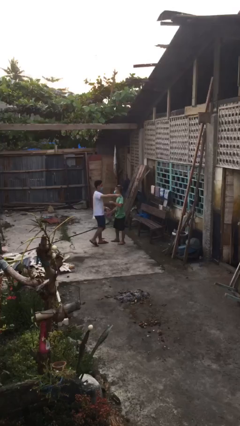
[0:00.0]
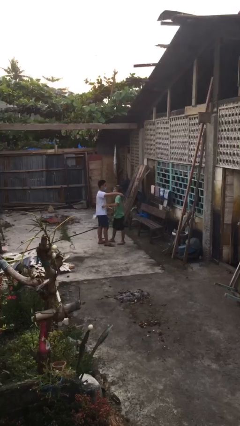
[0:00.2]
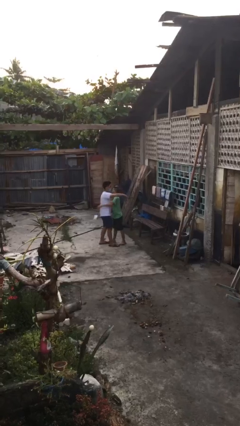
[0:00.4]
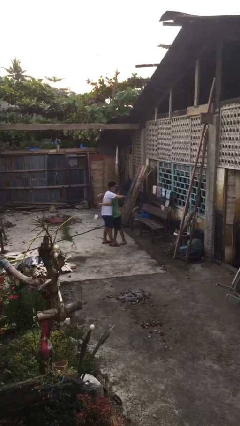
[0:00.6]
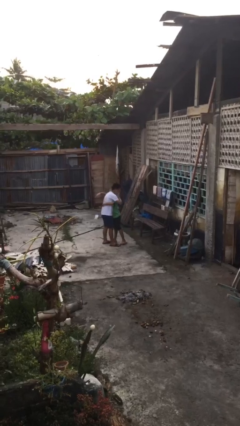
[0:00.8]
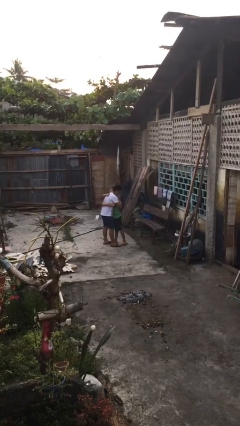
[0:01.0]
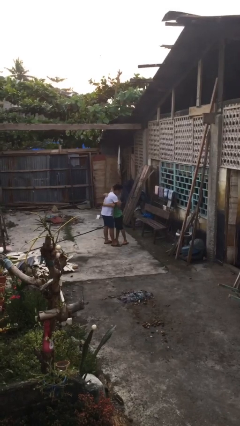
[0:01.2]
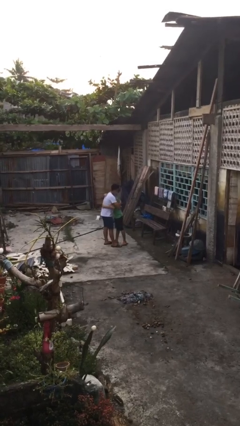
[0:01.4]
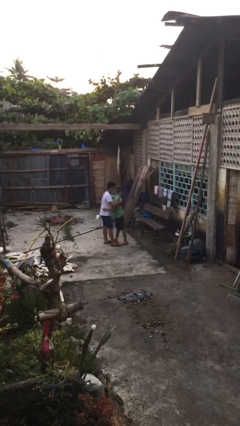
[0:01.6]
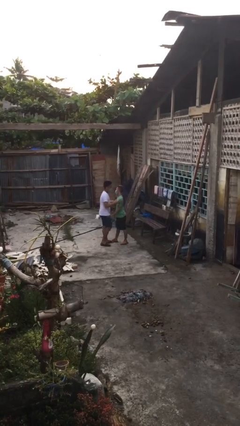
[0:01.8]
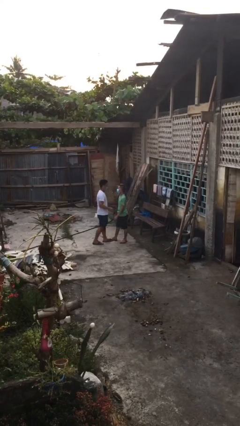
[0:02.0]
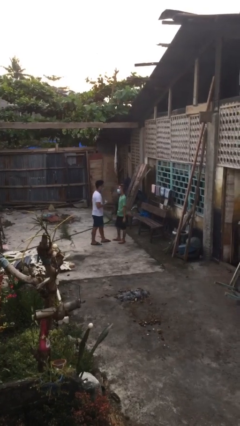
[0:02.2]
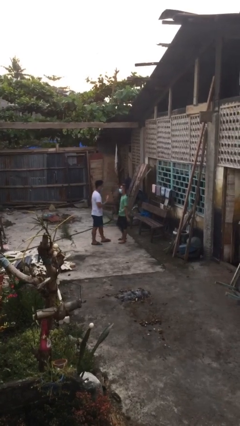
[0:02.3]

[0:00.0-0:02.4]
person embraces person

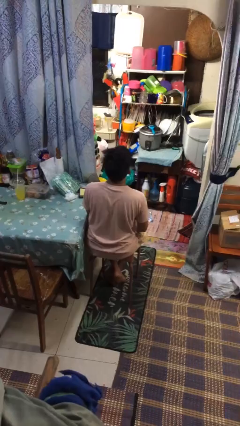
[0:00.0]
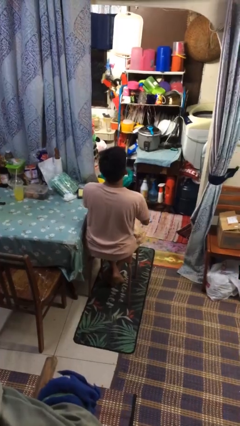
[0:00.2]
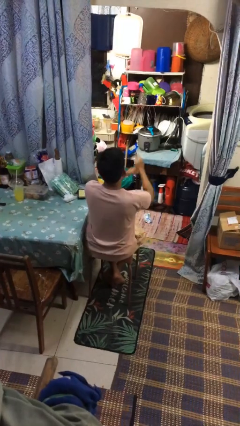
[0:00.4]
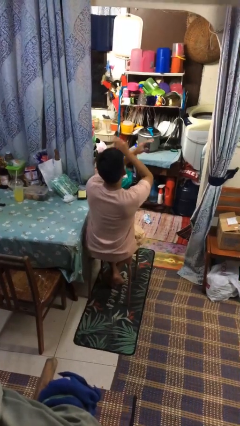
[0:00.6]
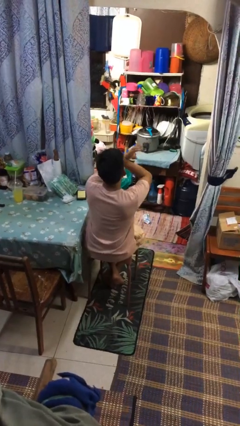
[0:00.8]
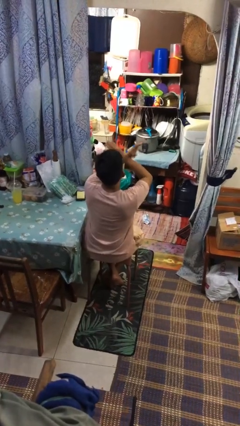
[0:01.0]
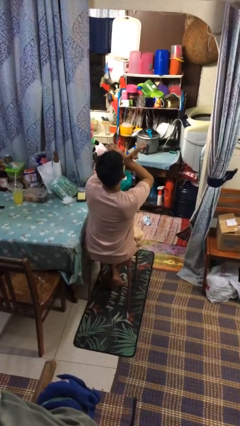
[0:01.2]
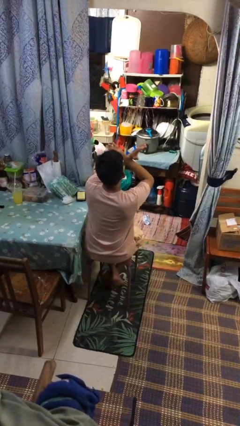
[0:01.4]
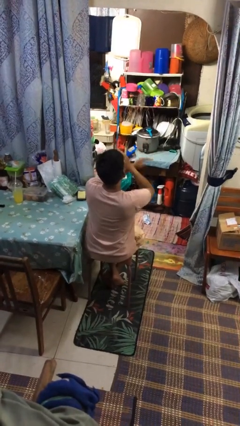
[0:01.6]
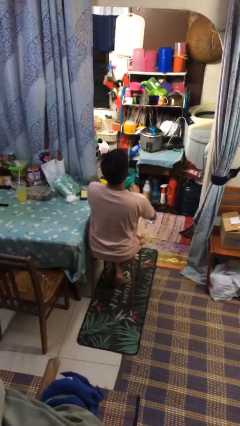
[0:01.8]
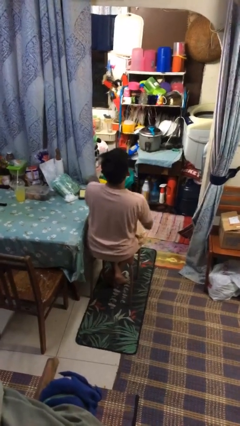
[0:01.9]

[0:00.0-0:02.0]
person gestures arms x

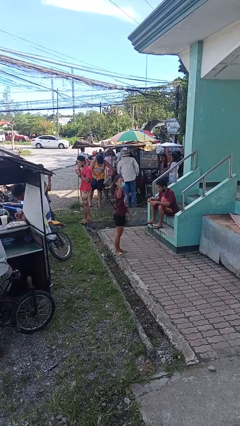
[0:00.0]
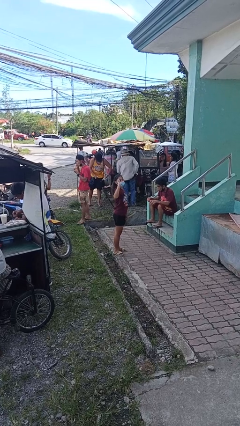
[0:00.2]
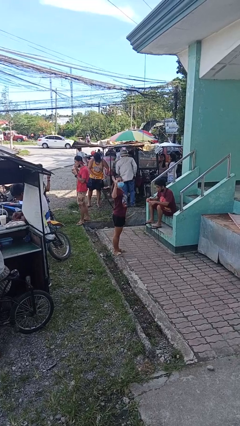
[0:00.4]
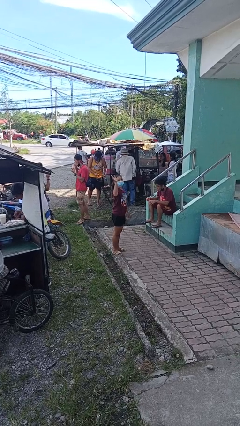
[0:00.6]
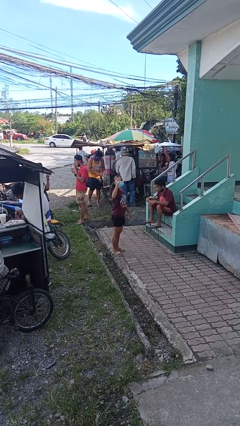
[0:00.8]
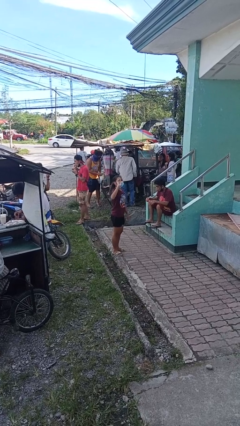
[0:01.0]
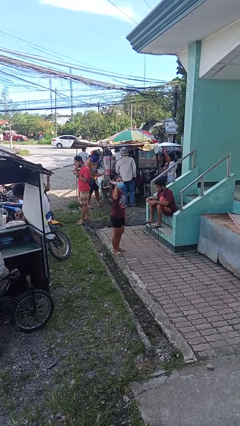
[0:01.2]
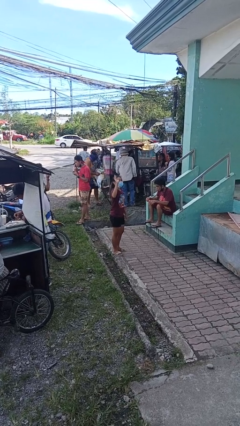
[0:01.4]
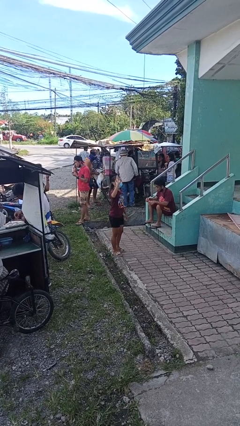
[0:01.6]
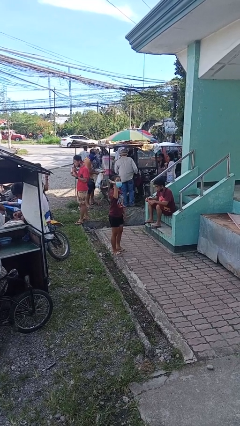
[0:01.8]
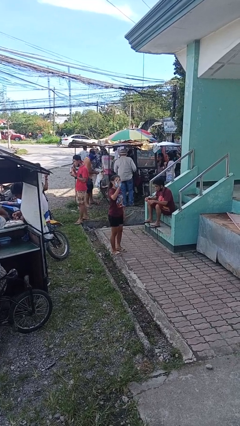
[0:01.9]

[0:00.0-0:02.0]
person waves at person

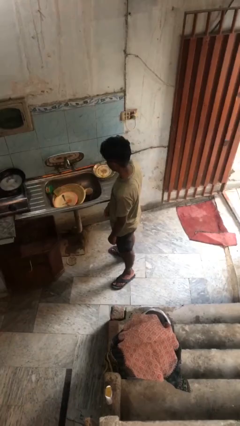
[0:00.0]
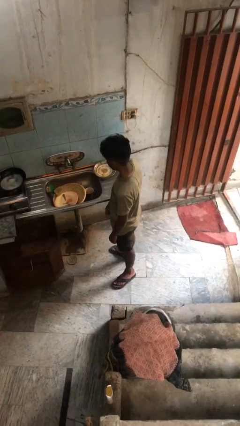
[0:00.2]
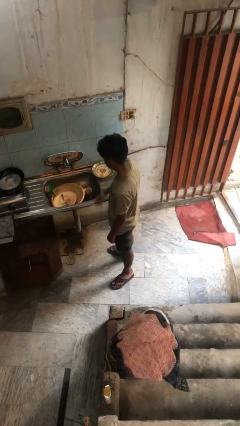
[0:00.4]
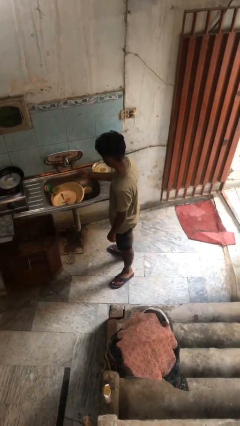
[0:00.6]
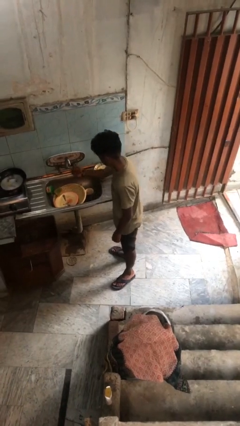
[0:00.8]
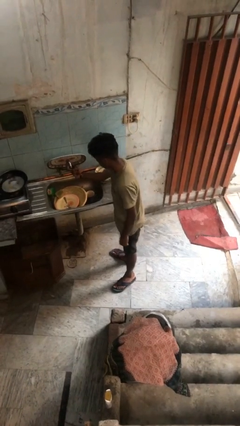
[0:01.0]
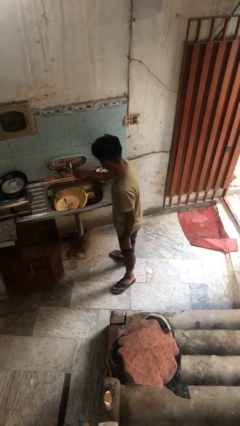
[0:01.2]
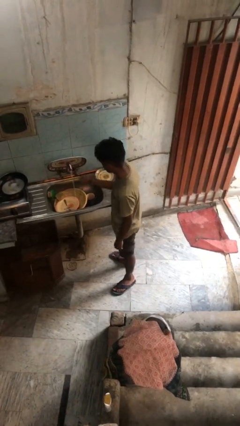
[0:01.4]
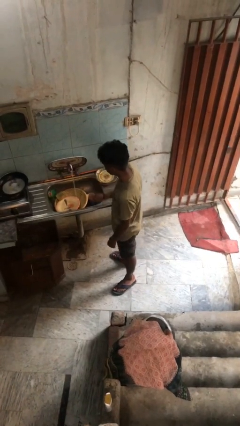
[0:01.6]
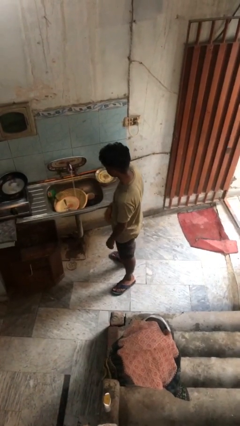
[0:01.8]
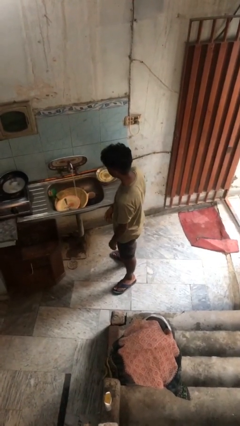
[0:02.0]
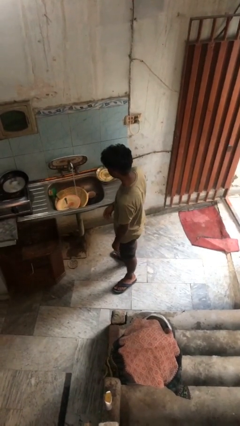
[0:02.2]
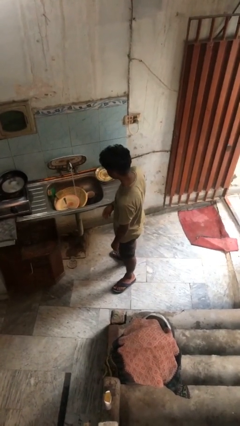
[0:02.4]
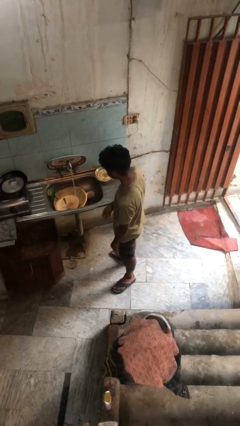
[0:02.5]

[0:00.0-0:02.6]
person turns on faucet

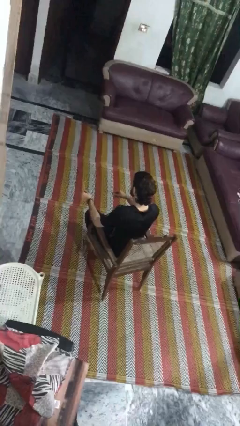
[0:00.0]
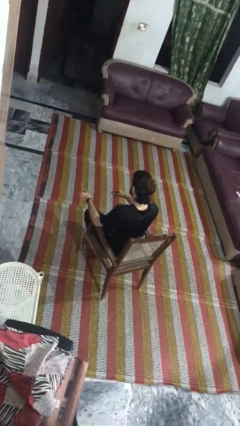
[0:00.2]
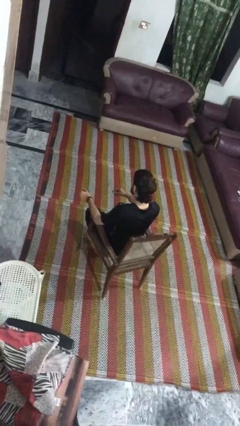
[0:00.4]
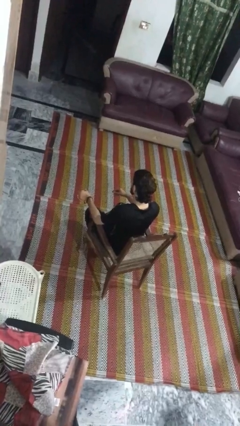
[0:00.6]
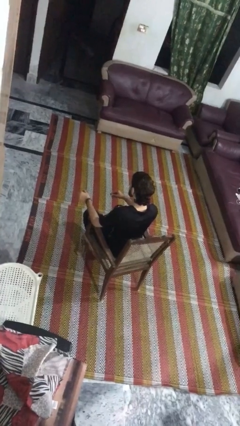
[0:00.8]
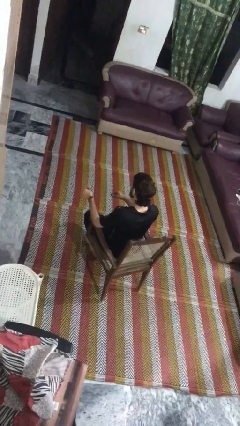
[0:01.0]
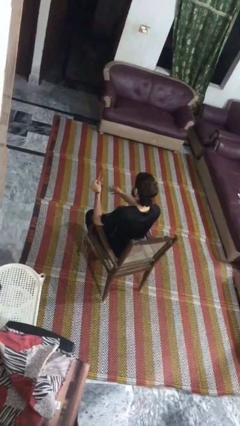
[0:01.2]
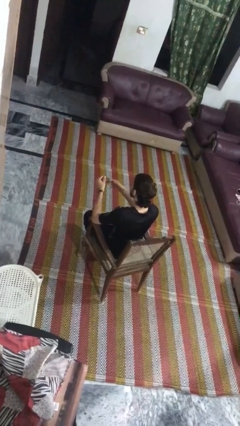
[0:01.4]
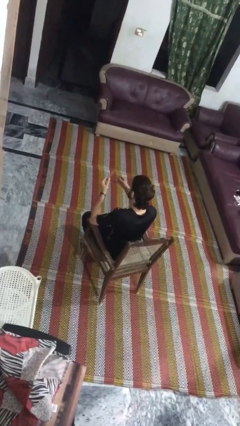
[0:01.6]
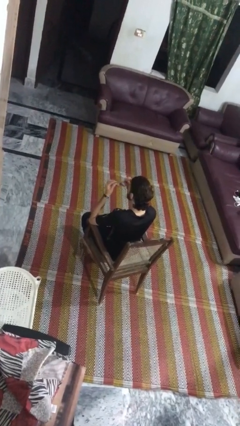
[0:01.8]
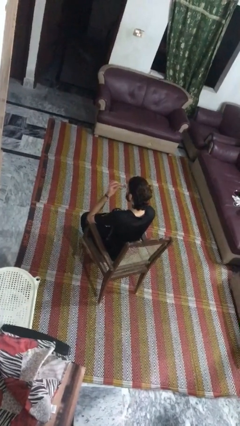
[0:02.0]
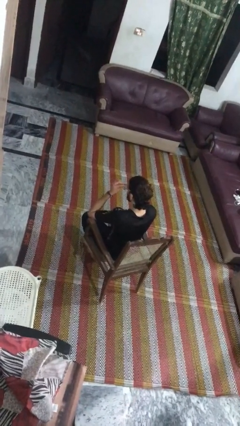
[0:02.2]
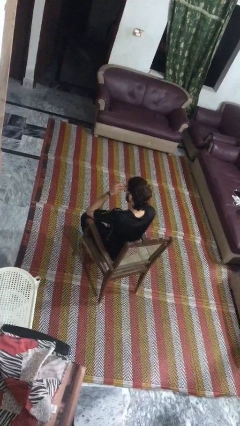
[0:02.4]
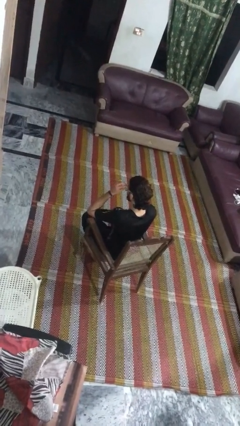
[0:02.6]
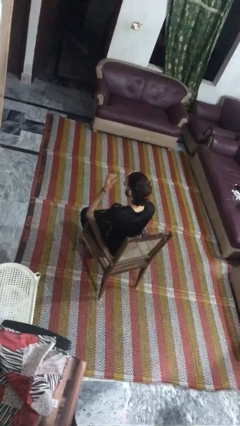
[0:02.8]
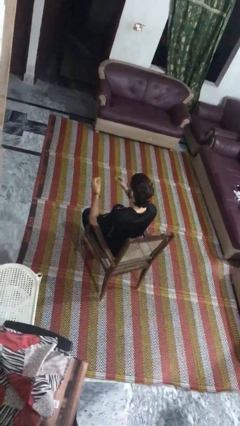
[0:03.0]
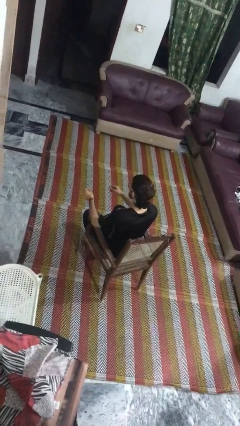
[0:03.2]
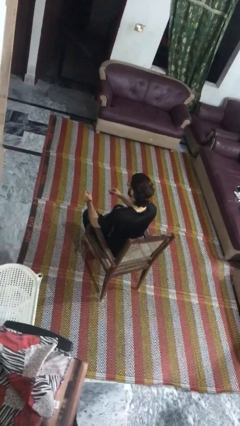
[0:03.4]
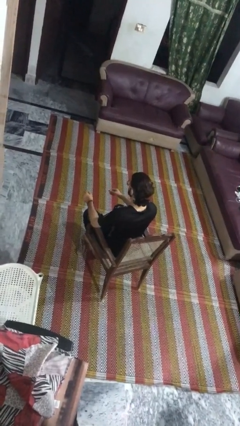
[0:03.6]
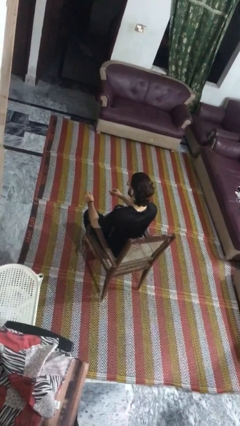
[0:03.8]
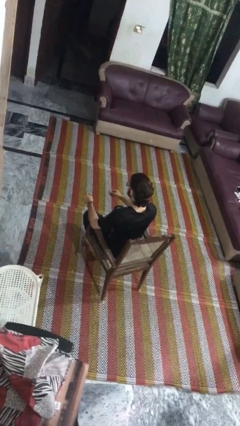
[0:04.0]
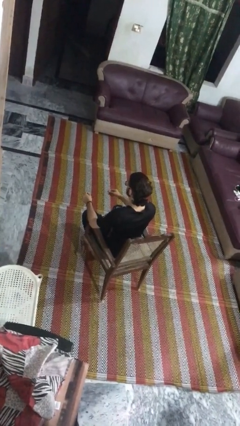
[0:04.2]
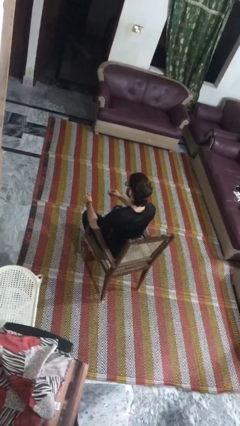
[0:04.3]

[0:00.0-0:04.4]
person puts on glasses

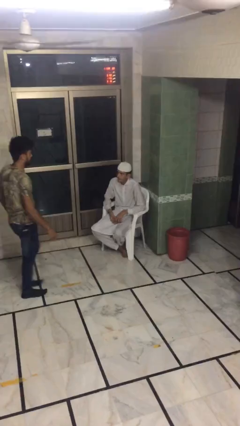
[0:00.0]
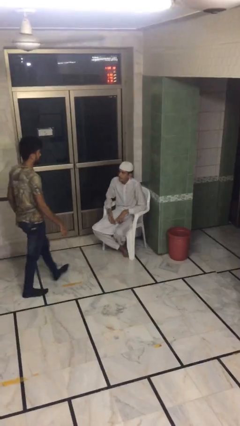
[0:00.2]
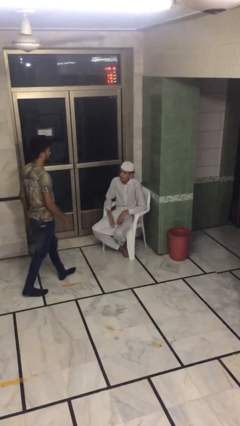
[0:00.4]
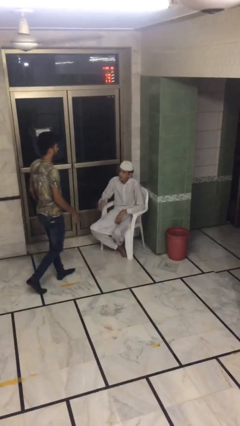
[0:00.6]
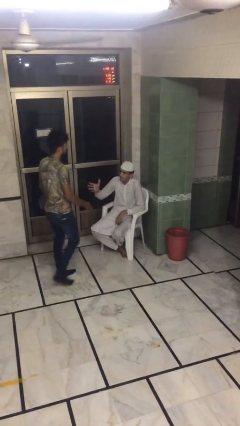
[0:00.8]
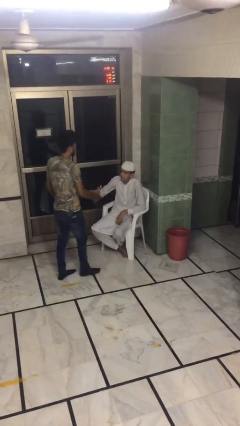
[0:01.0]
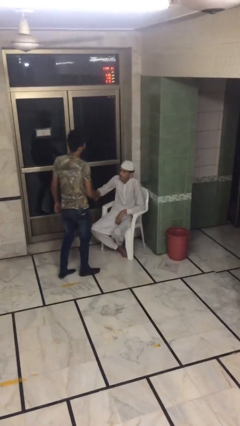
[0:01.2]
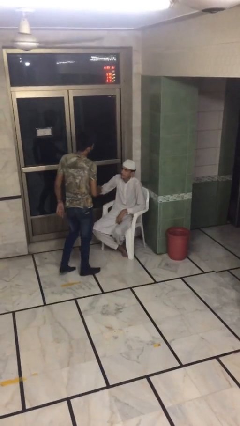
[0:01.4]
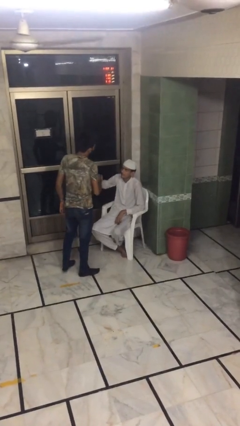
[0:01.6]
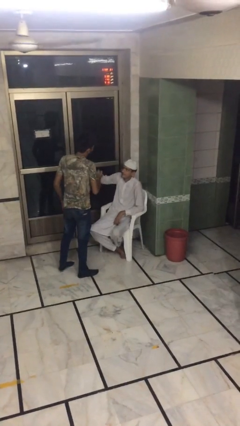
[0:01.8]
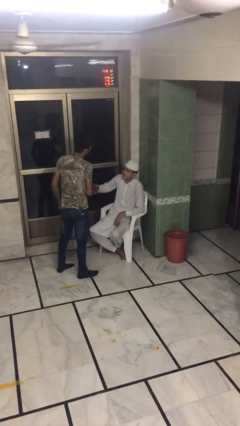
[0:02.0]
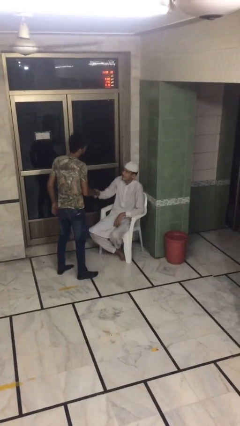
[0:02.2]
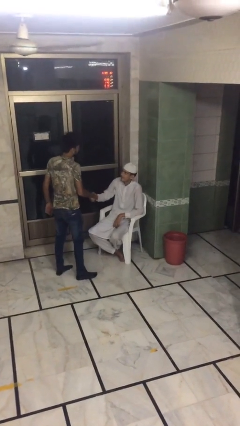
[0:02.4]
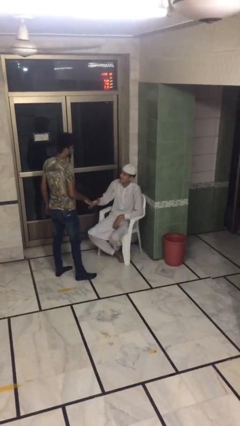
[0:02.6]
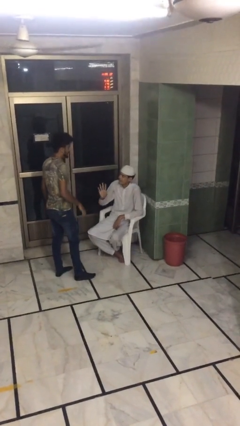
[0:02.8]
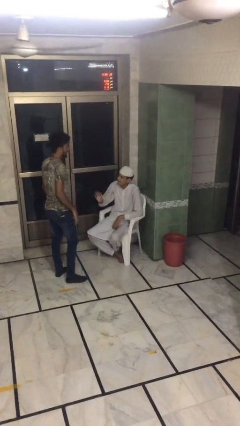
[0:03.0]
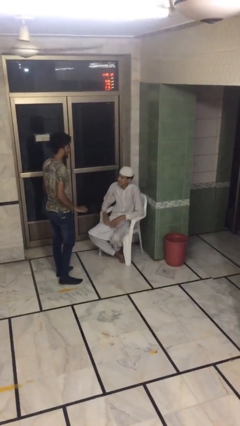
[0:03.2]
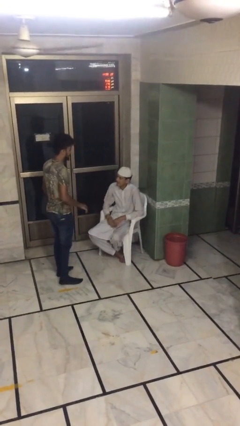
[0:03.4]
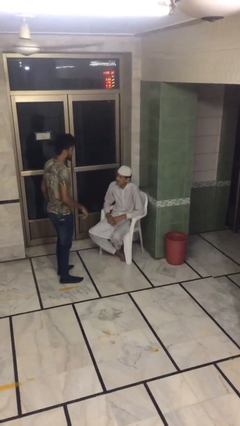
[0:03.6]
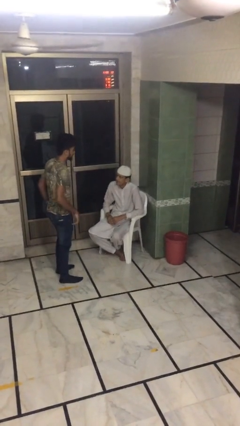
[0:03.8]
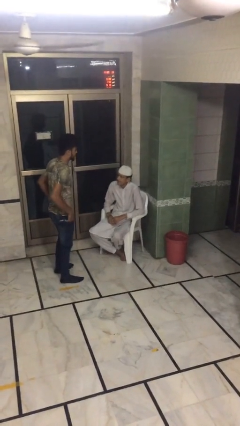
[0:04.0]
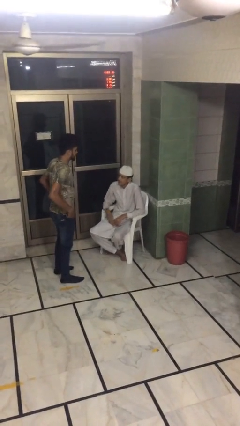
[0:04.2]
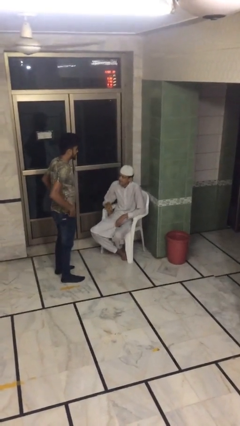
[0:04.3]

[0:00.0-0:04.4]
person shakes hand
